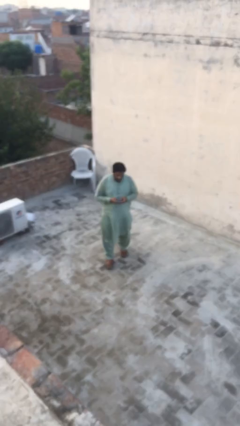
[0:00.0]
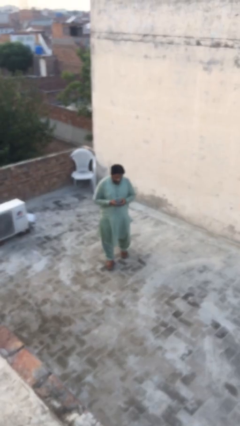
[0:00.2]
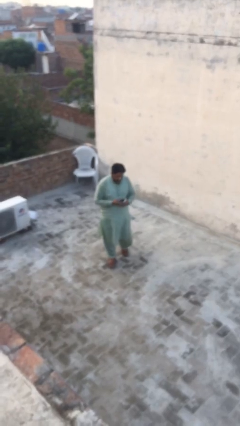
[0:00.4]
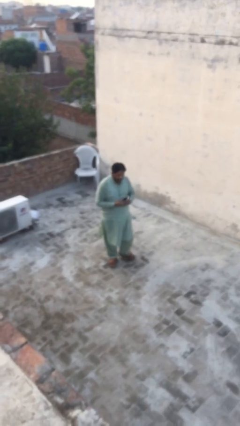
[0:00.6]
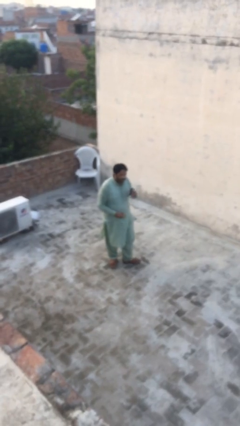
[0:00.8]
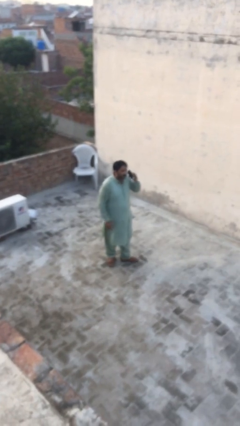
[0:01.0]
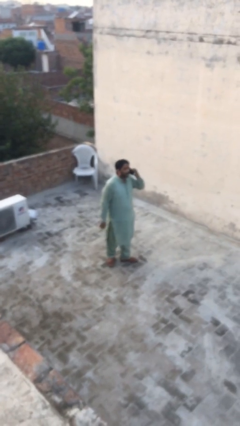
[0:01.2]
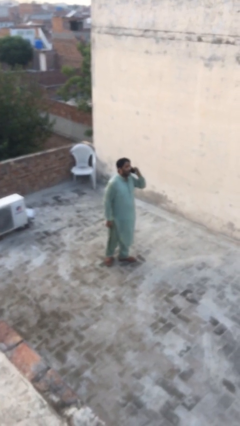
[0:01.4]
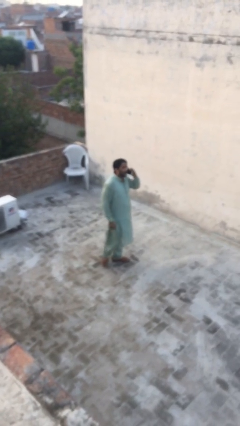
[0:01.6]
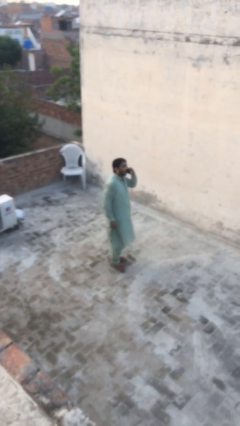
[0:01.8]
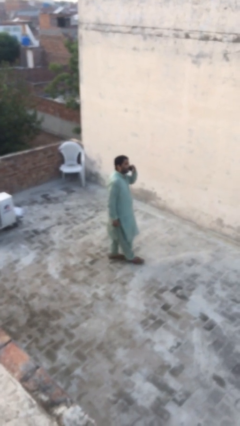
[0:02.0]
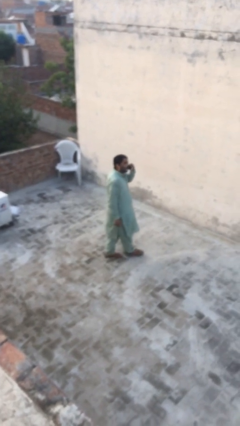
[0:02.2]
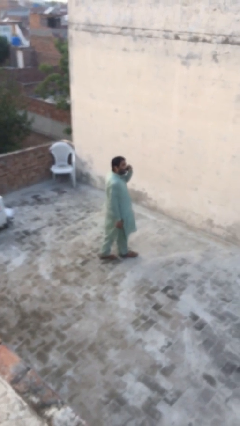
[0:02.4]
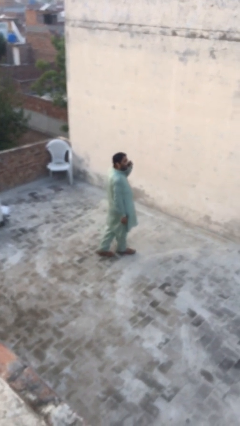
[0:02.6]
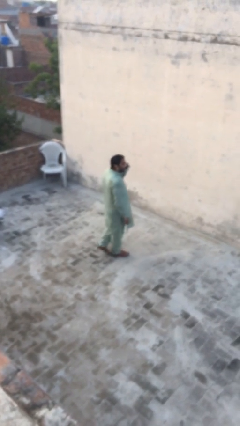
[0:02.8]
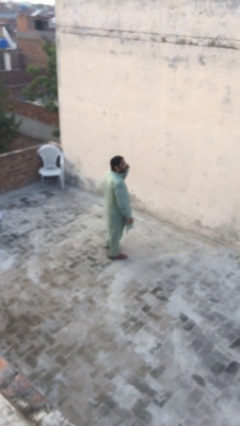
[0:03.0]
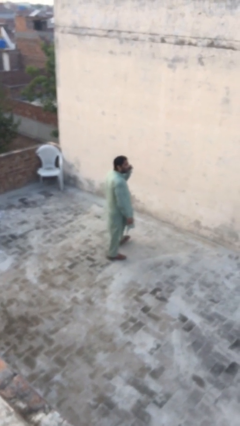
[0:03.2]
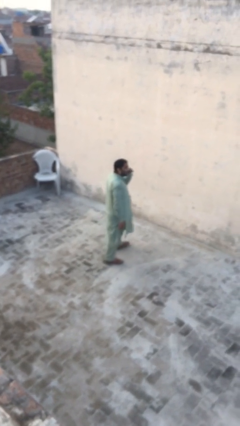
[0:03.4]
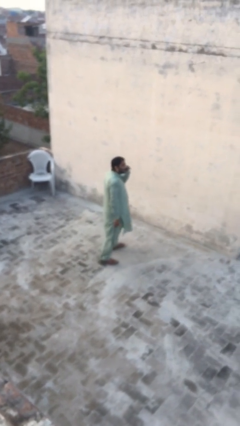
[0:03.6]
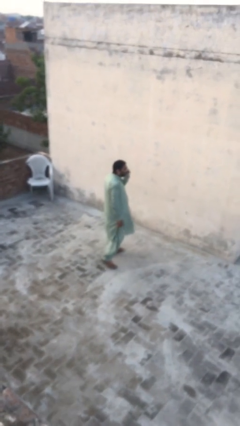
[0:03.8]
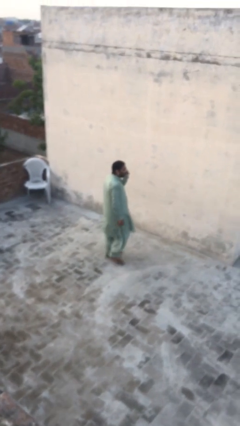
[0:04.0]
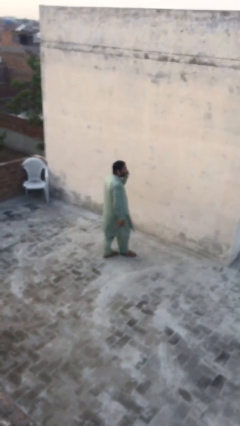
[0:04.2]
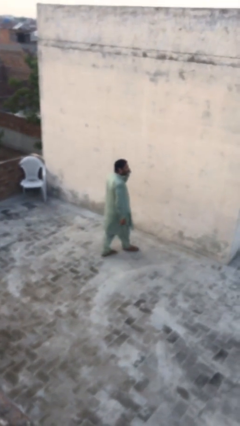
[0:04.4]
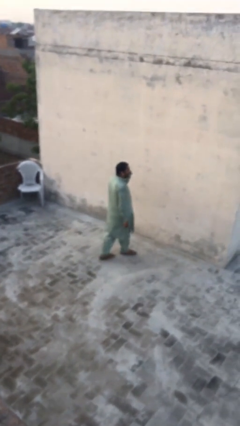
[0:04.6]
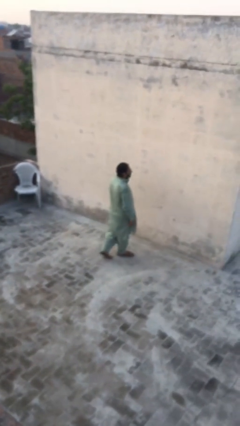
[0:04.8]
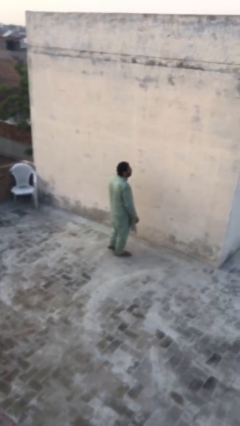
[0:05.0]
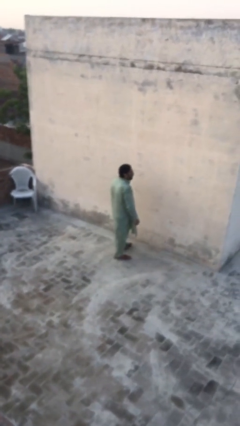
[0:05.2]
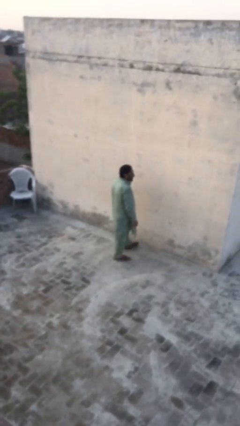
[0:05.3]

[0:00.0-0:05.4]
person talks on phone

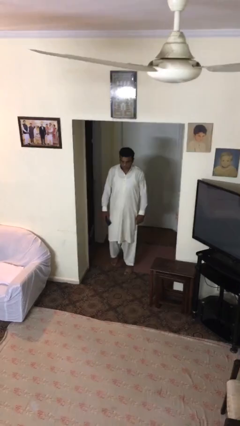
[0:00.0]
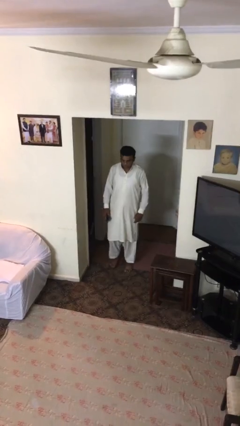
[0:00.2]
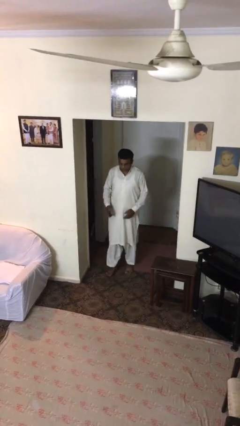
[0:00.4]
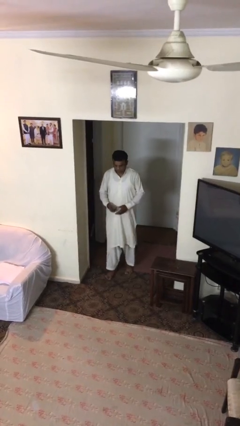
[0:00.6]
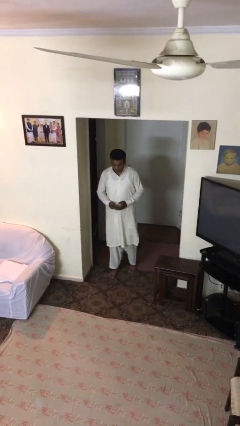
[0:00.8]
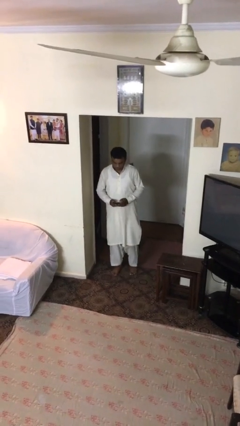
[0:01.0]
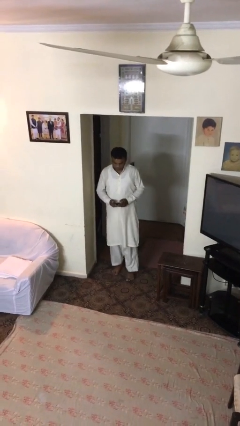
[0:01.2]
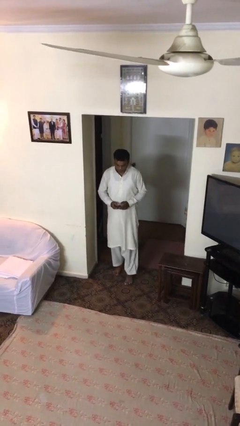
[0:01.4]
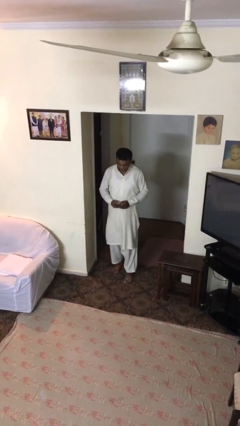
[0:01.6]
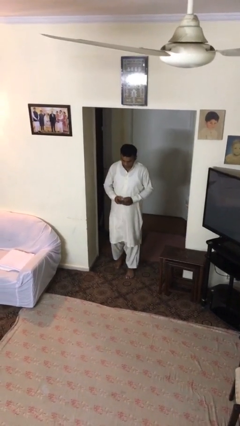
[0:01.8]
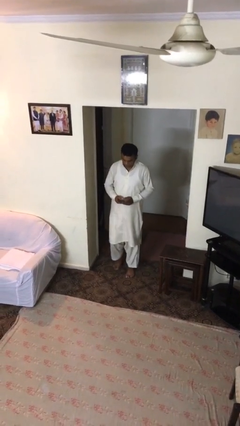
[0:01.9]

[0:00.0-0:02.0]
person texts on phone

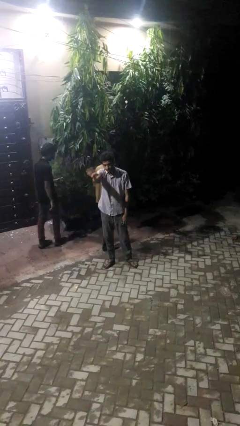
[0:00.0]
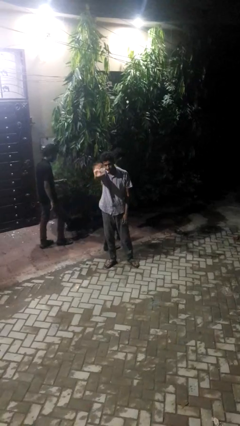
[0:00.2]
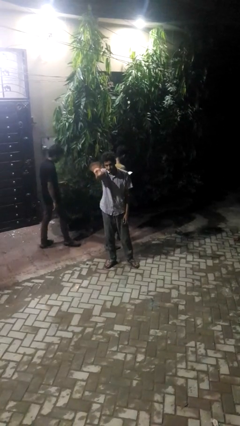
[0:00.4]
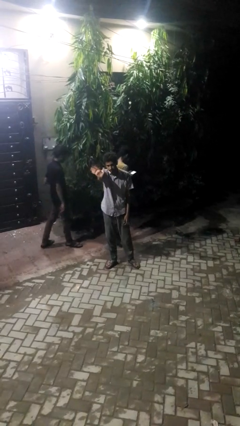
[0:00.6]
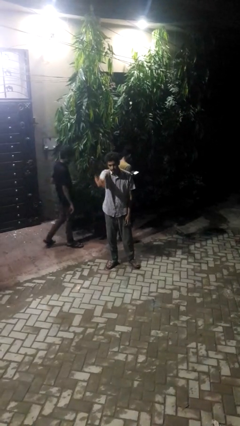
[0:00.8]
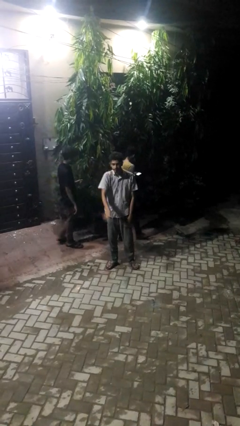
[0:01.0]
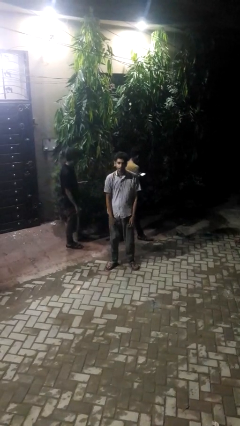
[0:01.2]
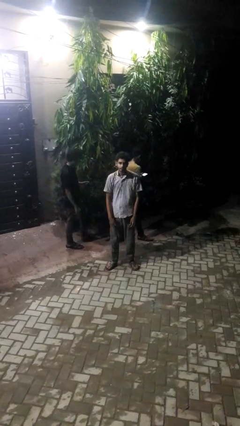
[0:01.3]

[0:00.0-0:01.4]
person waves at person

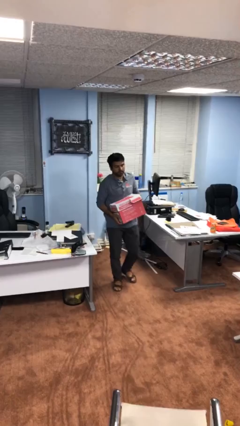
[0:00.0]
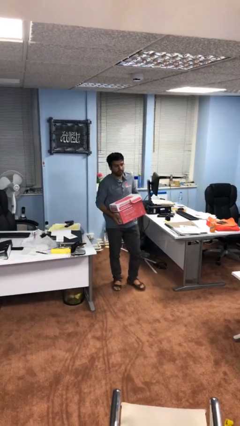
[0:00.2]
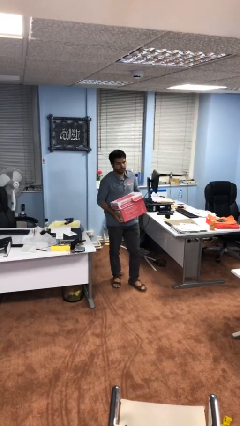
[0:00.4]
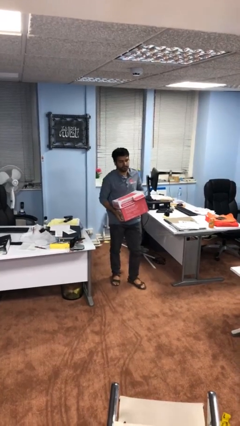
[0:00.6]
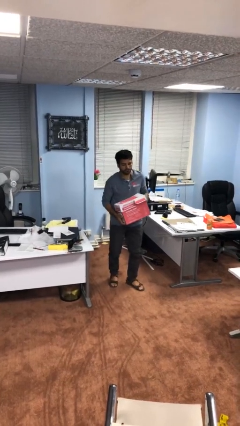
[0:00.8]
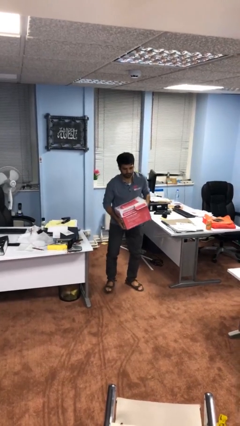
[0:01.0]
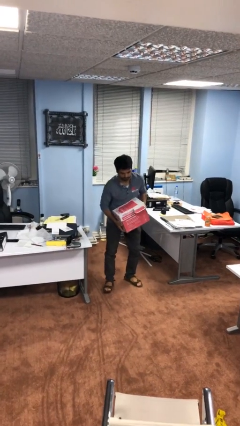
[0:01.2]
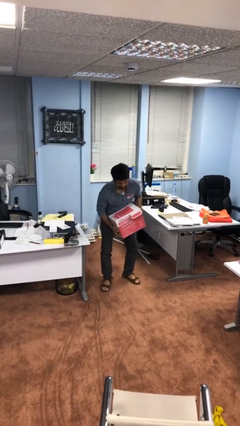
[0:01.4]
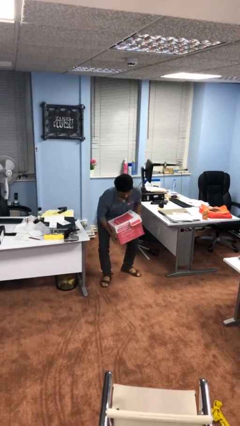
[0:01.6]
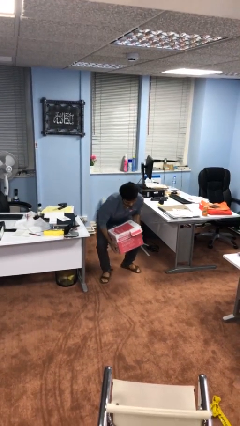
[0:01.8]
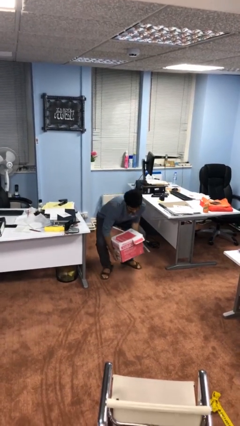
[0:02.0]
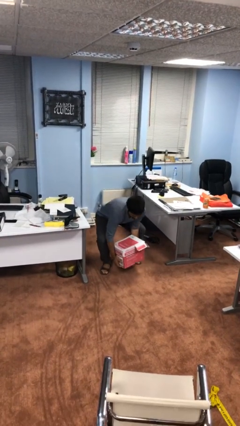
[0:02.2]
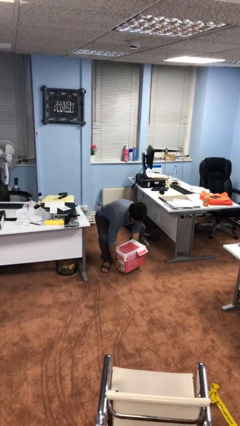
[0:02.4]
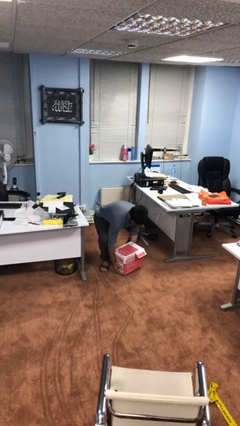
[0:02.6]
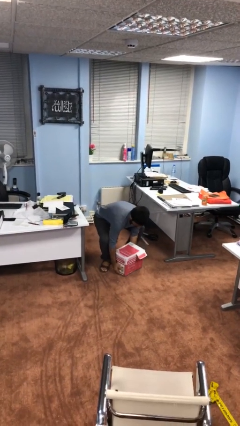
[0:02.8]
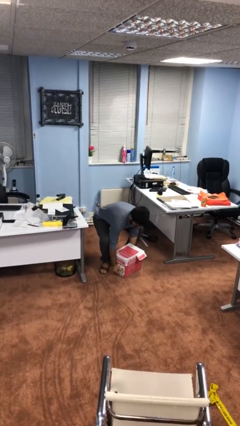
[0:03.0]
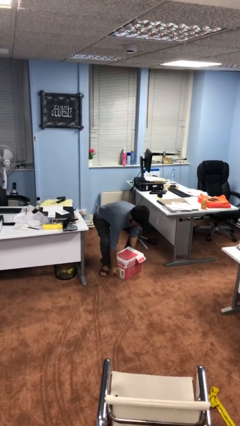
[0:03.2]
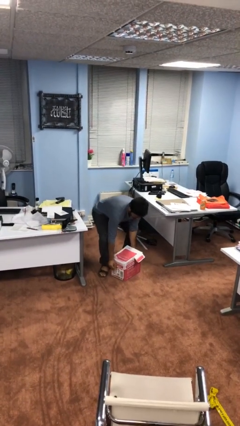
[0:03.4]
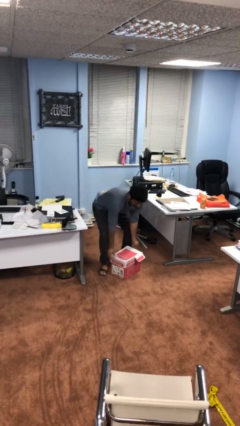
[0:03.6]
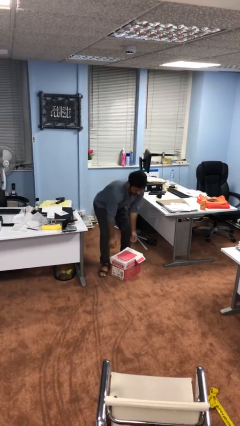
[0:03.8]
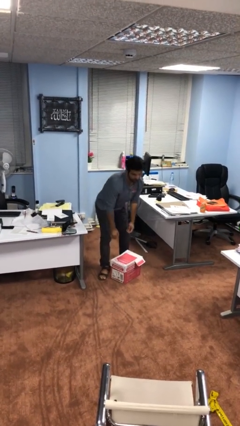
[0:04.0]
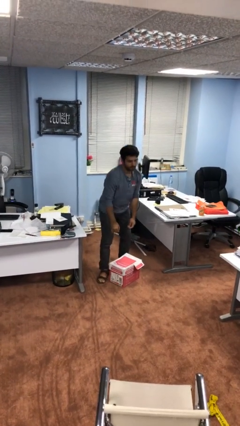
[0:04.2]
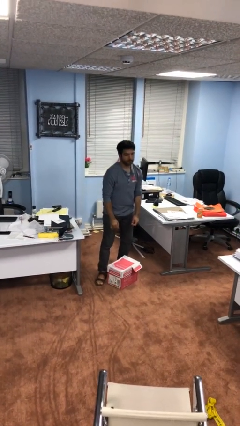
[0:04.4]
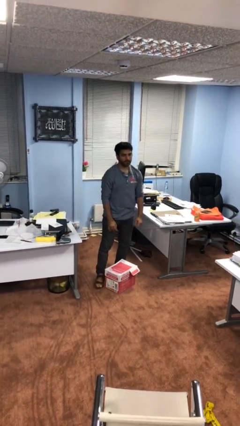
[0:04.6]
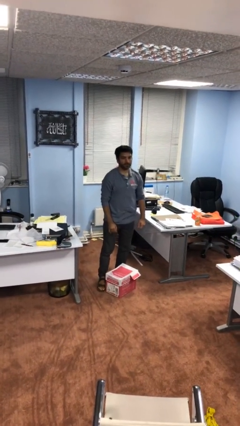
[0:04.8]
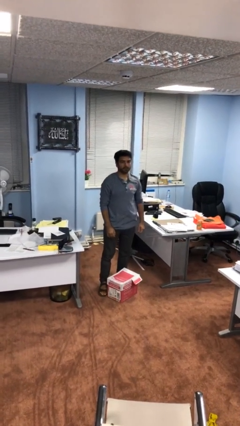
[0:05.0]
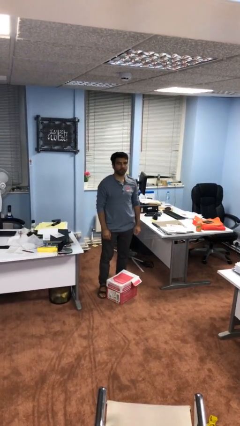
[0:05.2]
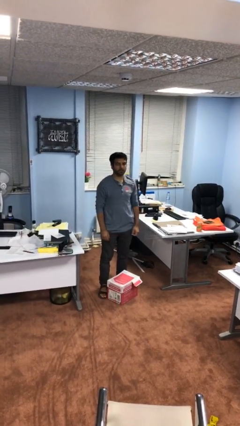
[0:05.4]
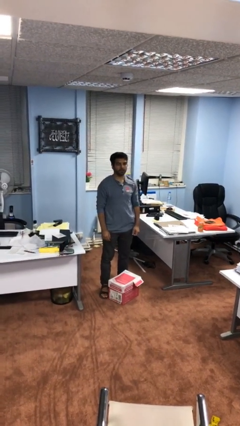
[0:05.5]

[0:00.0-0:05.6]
person puts down object on floor

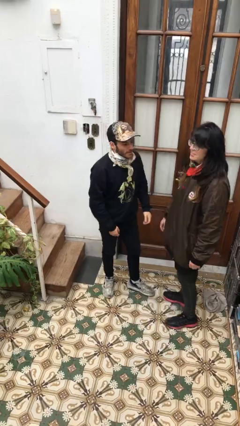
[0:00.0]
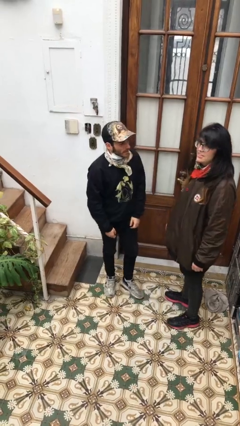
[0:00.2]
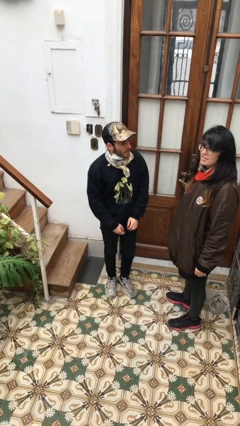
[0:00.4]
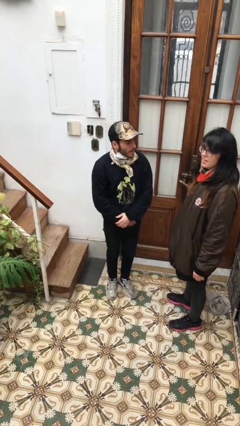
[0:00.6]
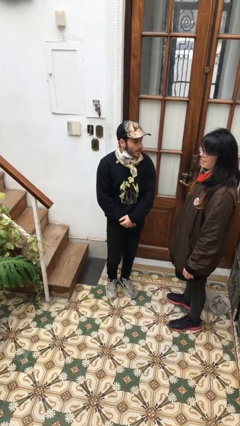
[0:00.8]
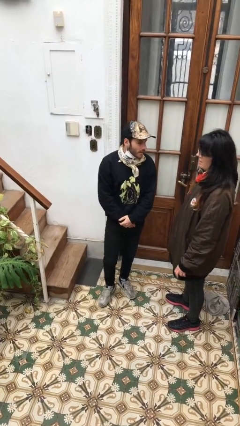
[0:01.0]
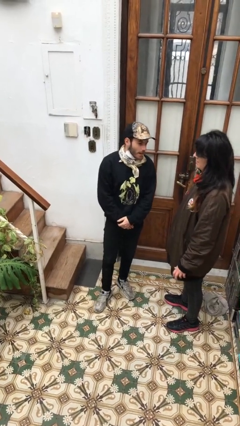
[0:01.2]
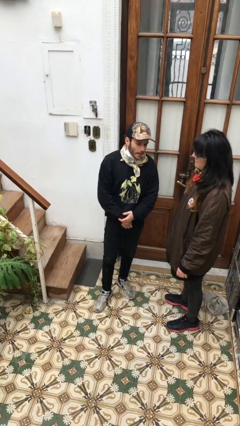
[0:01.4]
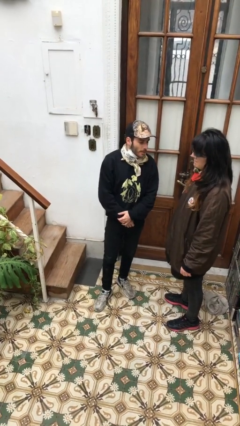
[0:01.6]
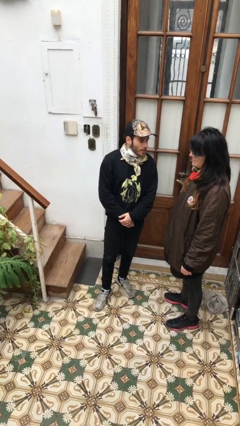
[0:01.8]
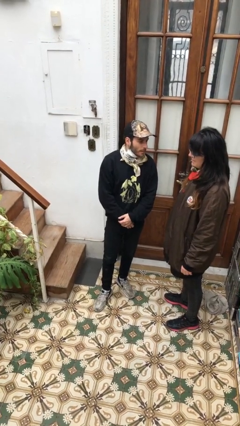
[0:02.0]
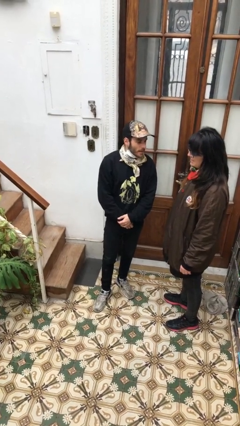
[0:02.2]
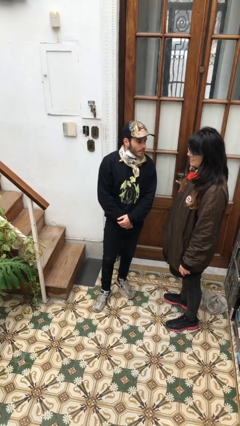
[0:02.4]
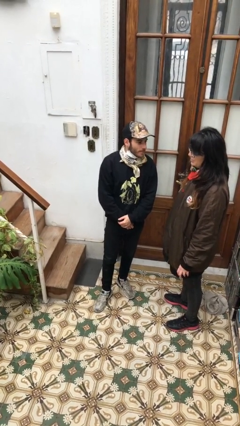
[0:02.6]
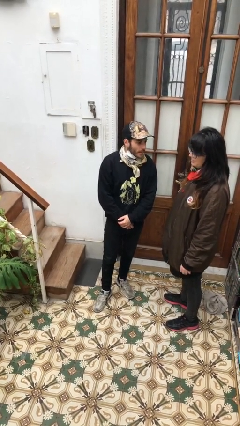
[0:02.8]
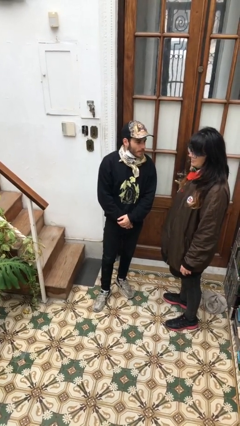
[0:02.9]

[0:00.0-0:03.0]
person talks to person

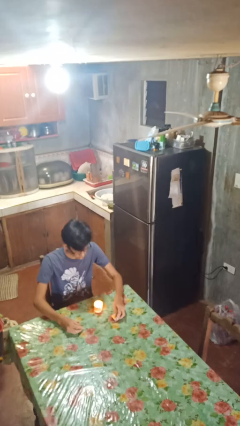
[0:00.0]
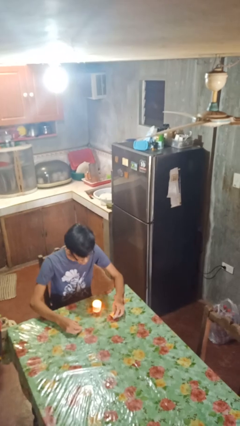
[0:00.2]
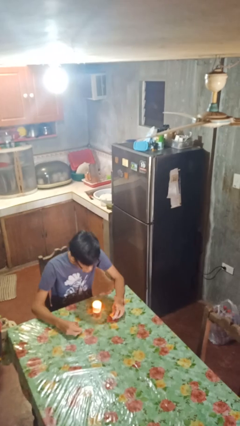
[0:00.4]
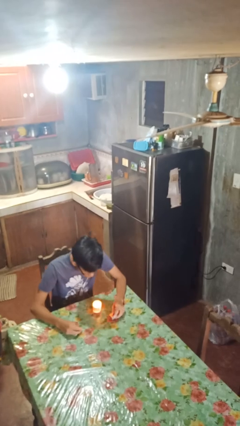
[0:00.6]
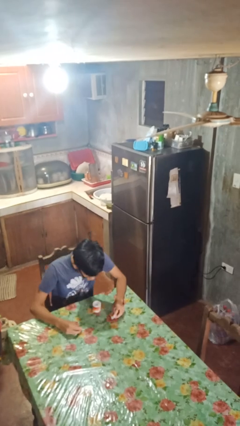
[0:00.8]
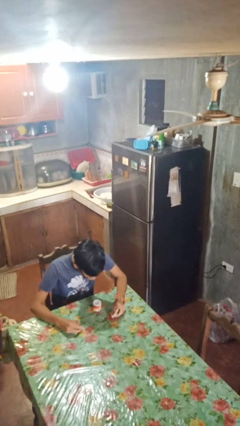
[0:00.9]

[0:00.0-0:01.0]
person extinguishes candle
